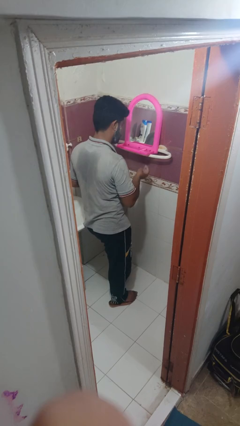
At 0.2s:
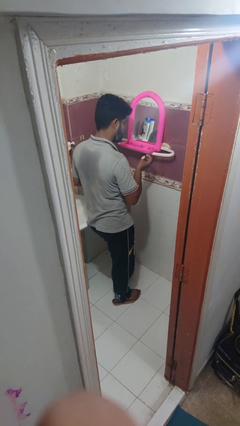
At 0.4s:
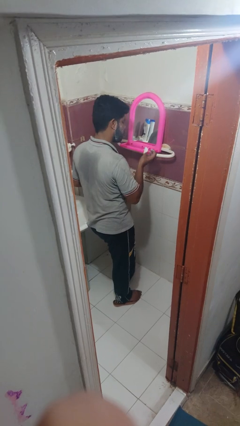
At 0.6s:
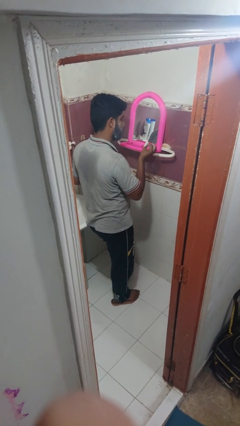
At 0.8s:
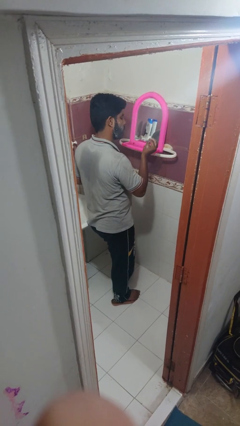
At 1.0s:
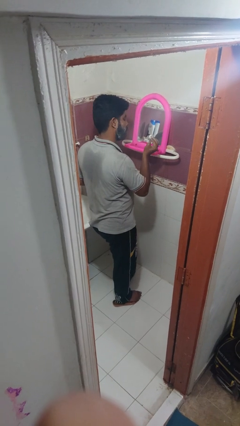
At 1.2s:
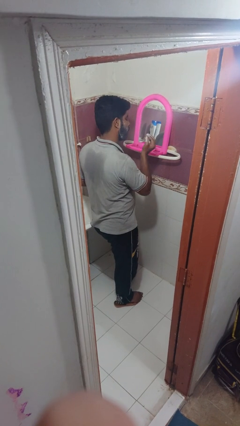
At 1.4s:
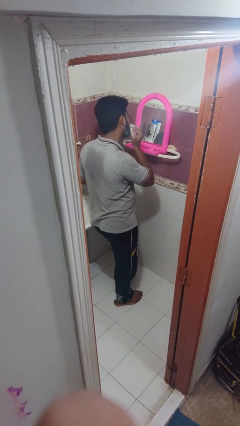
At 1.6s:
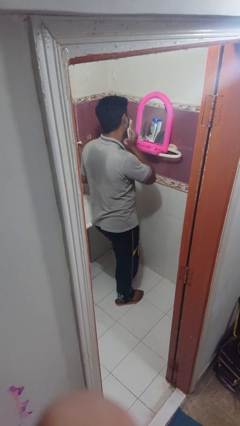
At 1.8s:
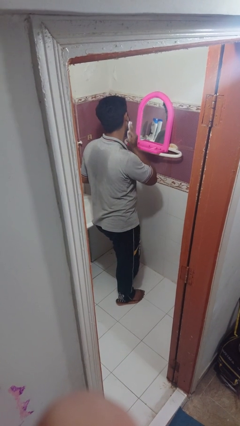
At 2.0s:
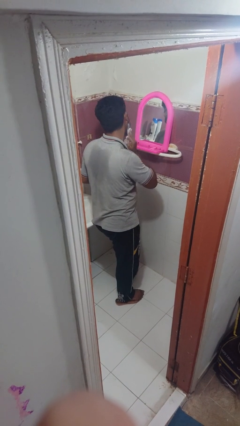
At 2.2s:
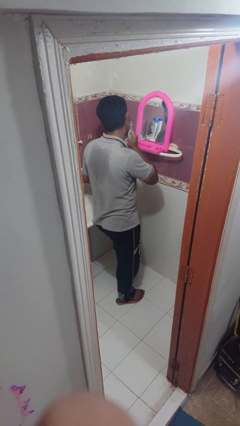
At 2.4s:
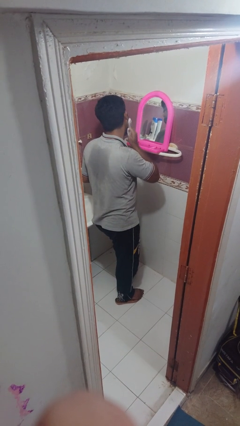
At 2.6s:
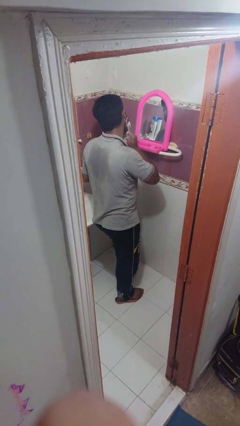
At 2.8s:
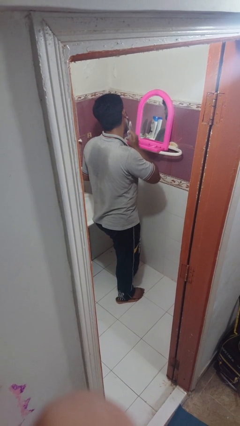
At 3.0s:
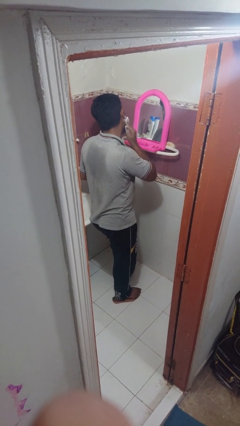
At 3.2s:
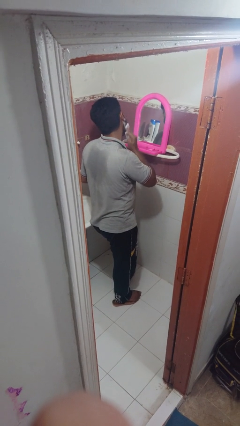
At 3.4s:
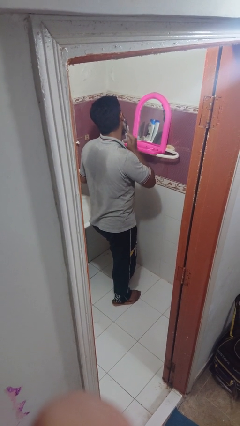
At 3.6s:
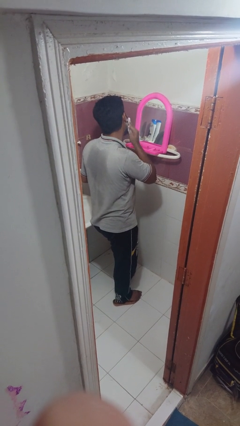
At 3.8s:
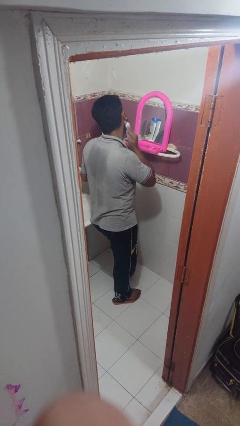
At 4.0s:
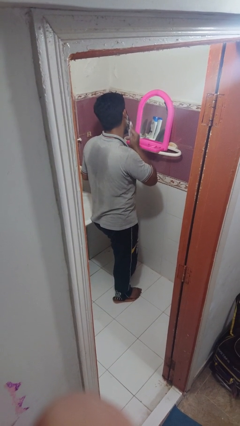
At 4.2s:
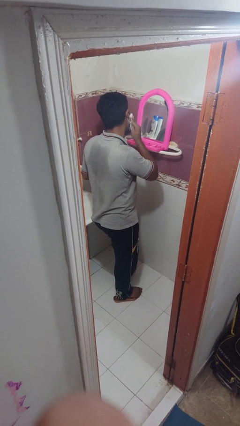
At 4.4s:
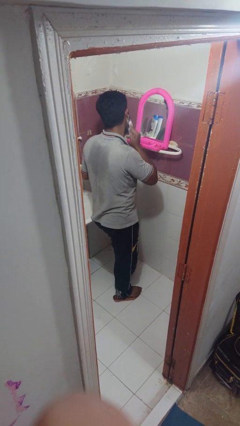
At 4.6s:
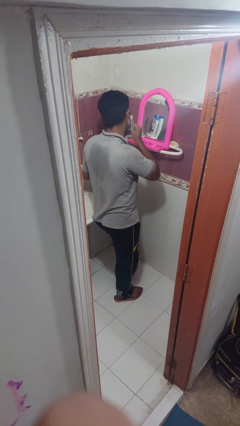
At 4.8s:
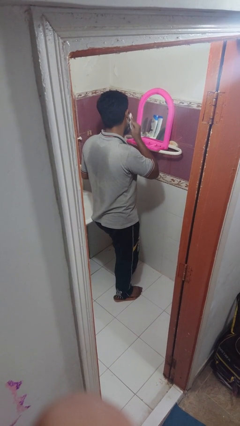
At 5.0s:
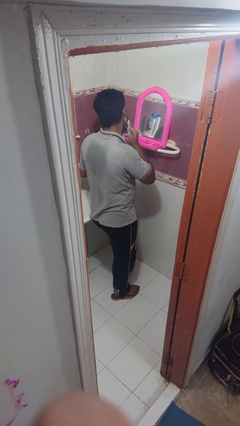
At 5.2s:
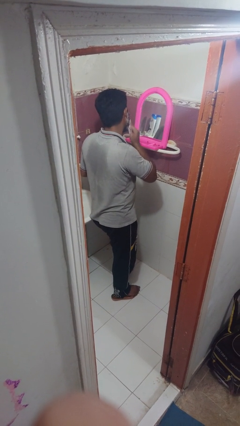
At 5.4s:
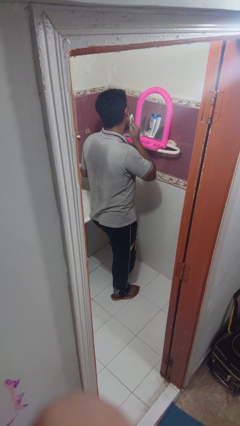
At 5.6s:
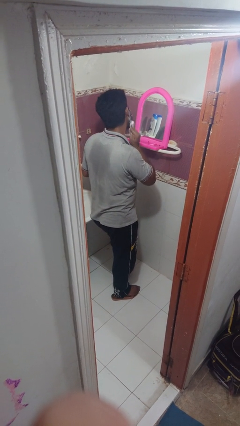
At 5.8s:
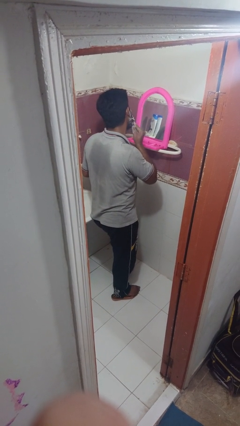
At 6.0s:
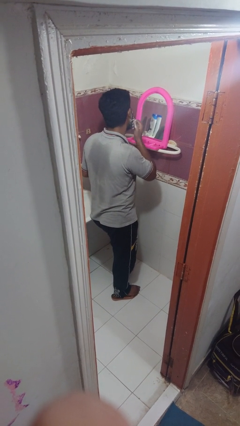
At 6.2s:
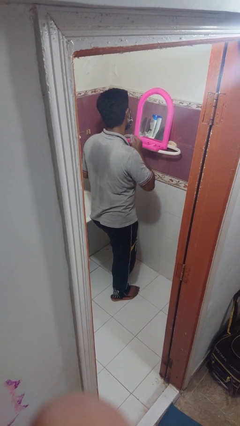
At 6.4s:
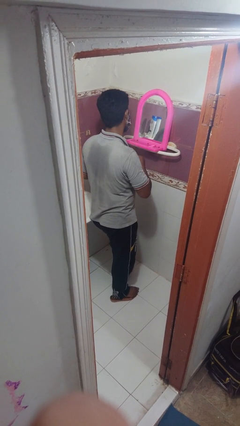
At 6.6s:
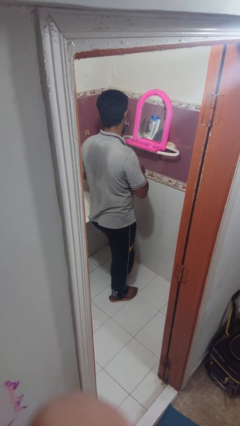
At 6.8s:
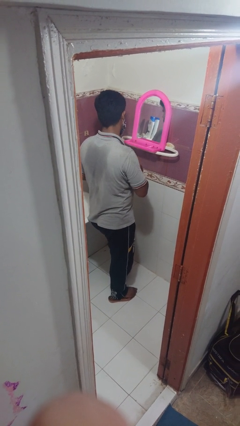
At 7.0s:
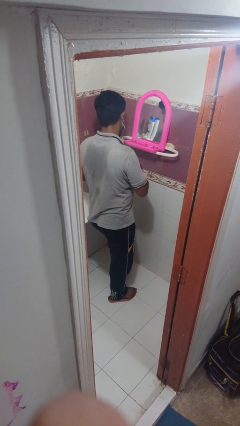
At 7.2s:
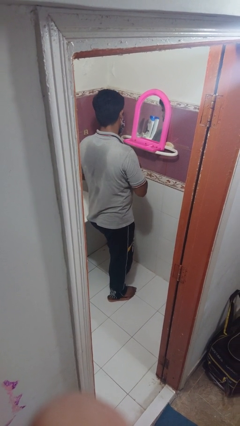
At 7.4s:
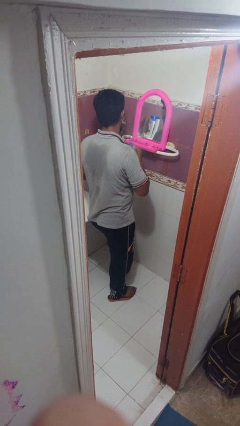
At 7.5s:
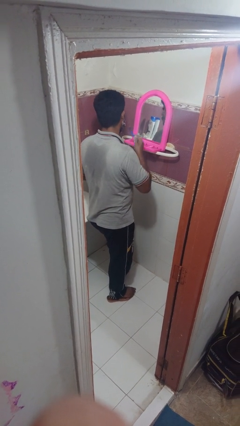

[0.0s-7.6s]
person applies shaving cream

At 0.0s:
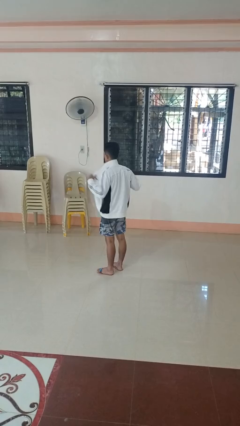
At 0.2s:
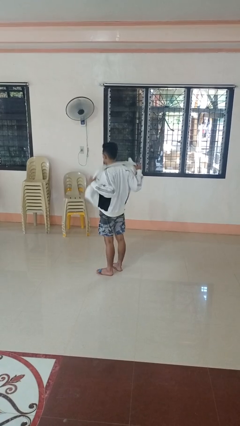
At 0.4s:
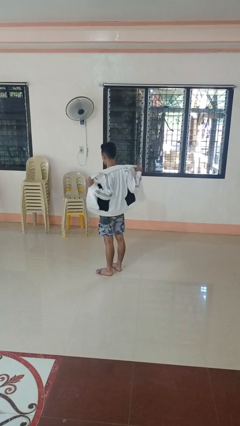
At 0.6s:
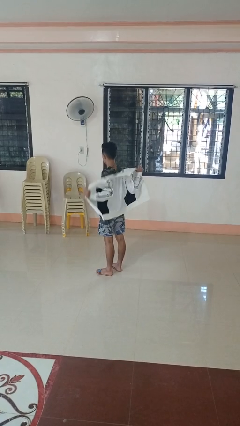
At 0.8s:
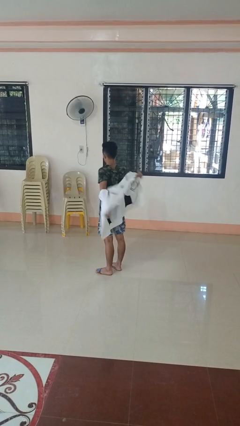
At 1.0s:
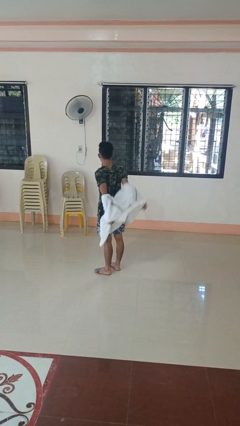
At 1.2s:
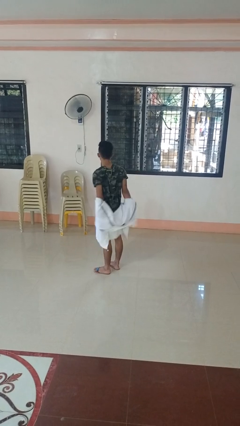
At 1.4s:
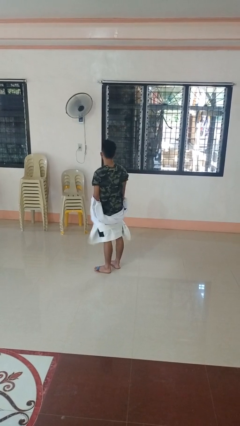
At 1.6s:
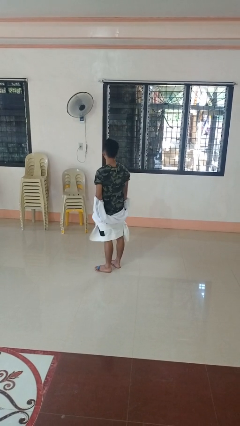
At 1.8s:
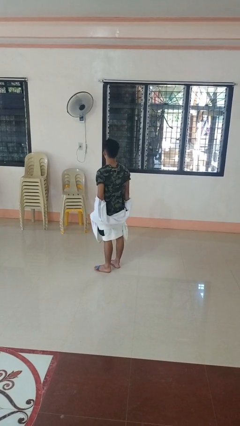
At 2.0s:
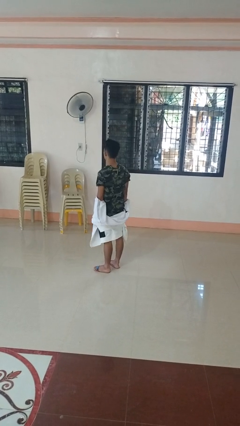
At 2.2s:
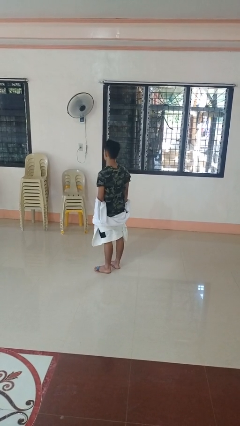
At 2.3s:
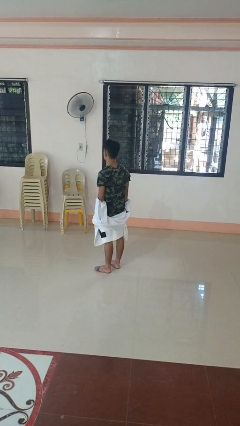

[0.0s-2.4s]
person takes off jacket

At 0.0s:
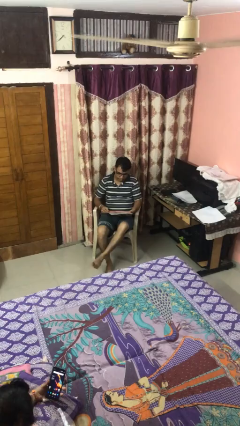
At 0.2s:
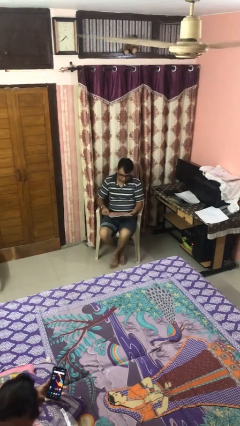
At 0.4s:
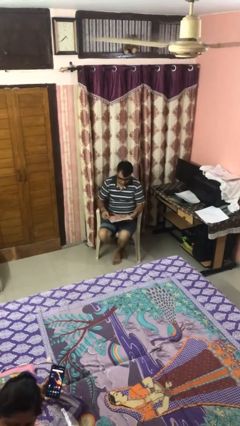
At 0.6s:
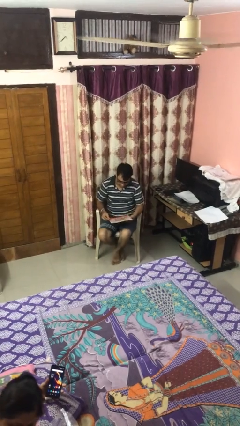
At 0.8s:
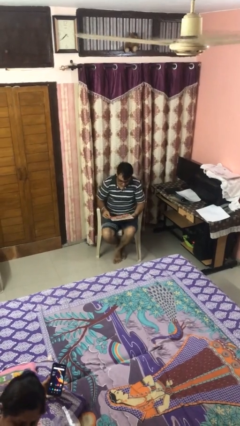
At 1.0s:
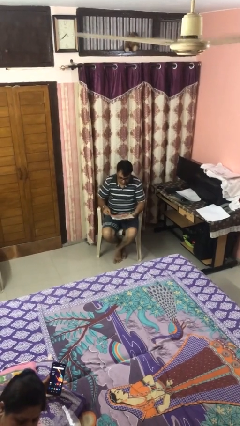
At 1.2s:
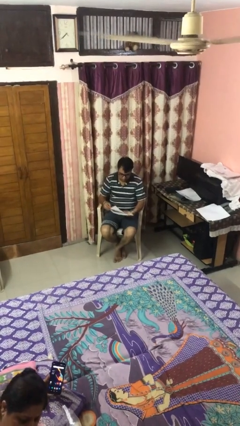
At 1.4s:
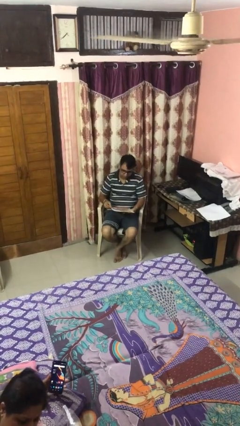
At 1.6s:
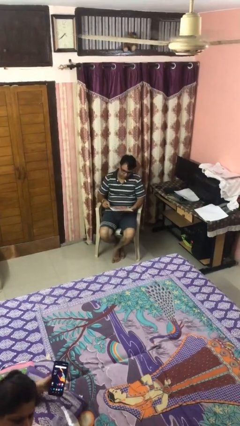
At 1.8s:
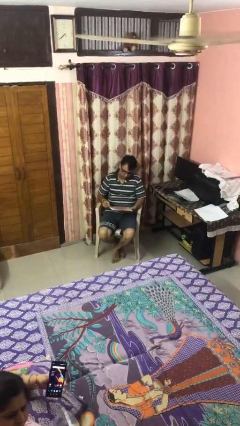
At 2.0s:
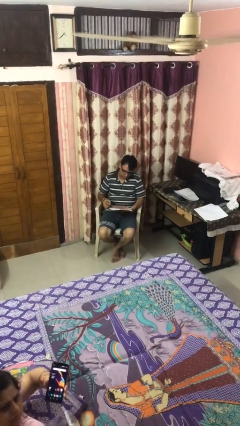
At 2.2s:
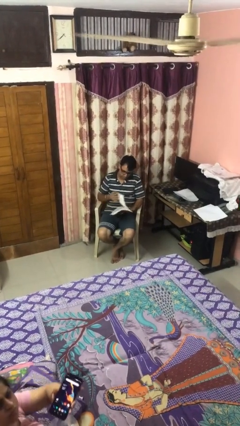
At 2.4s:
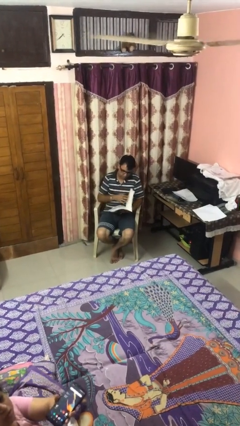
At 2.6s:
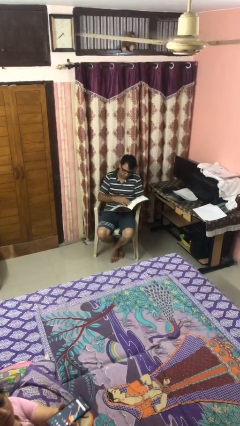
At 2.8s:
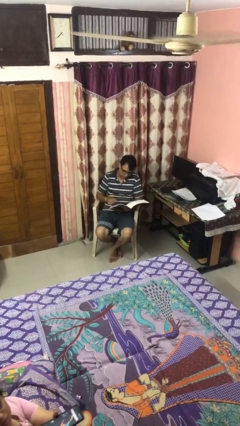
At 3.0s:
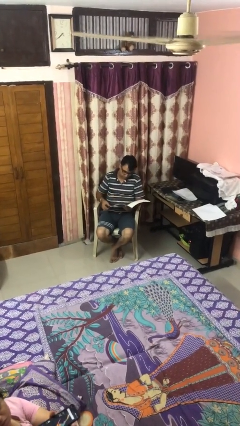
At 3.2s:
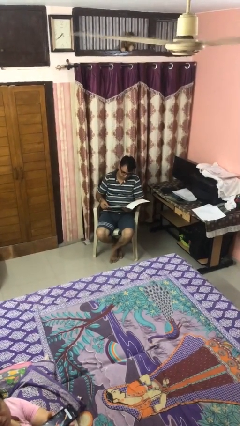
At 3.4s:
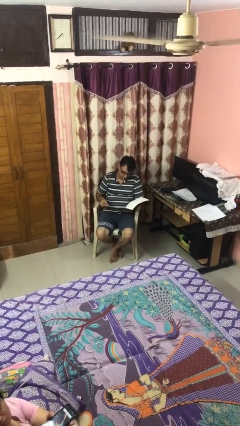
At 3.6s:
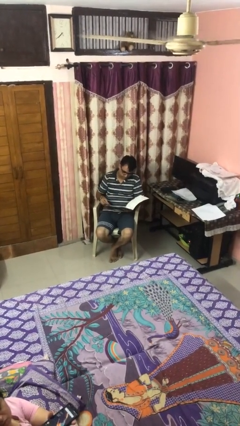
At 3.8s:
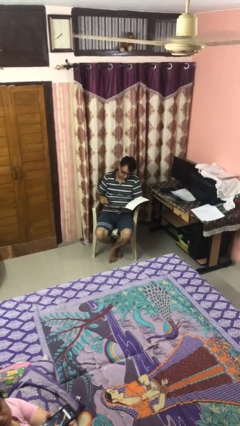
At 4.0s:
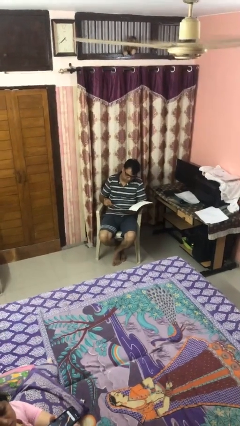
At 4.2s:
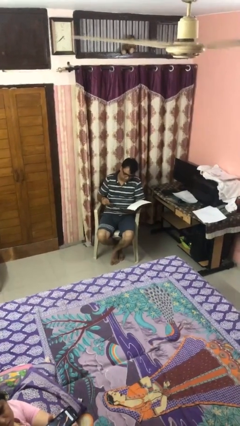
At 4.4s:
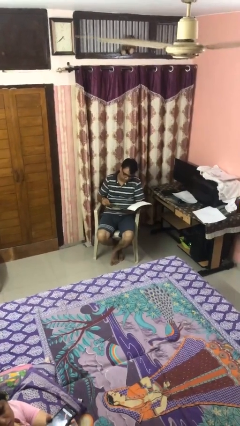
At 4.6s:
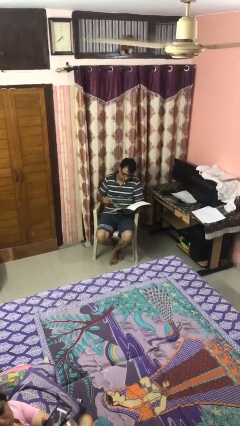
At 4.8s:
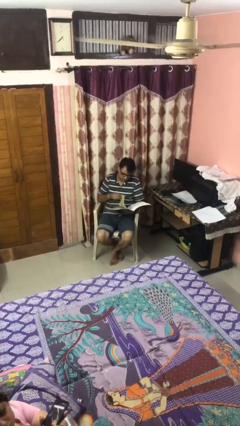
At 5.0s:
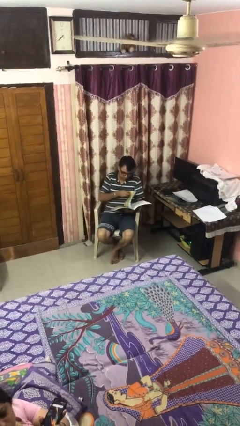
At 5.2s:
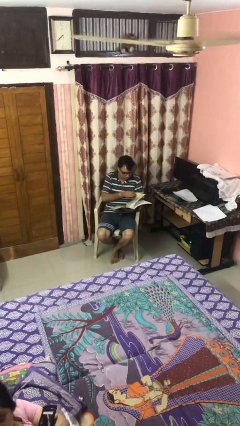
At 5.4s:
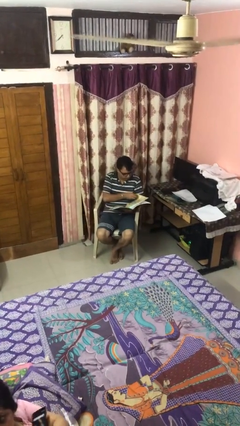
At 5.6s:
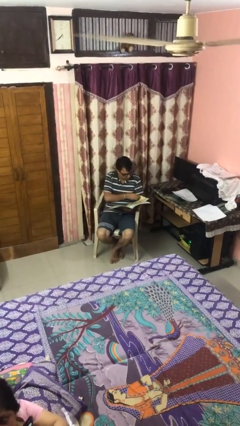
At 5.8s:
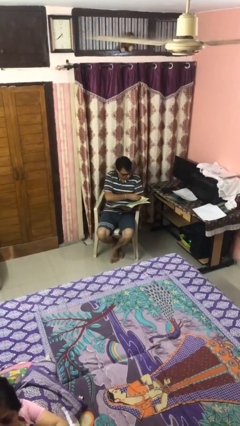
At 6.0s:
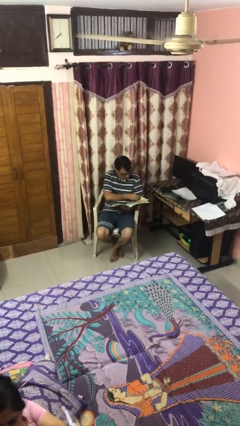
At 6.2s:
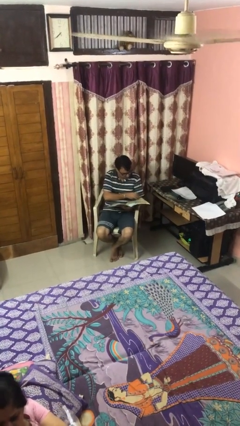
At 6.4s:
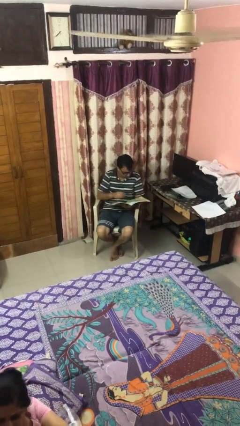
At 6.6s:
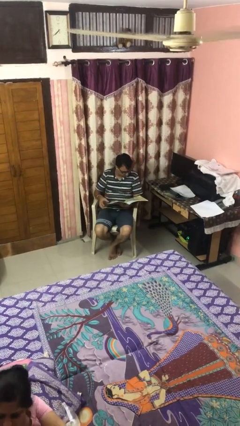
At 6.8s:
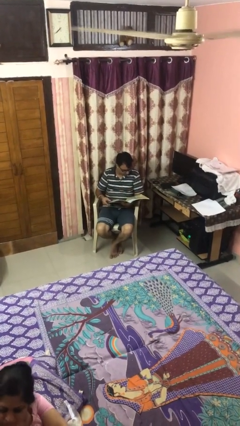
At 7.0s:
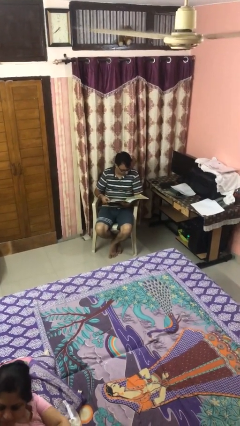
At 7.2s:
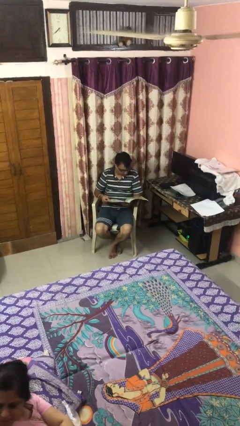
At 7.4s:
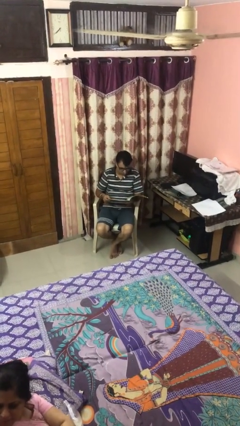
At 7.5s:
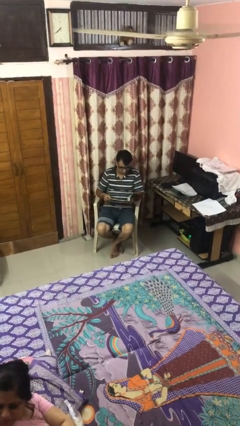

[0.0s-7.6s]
person reads magazine

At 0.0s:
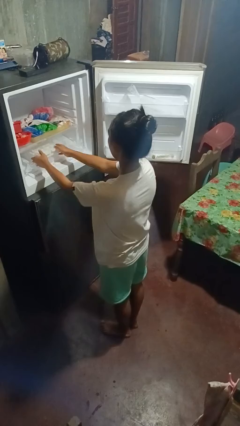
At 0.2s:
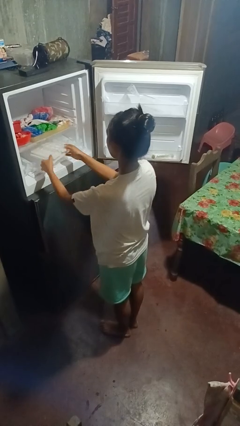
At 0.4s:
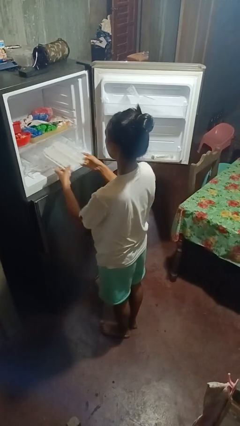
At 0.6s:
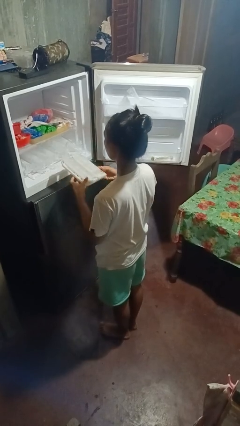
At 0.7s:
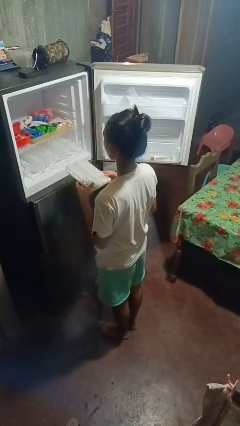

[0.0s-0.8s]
person takes object from refrigerator
